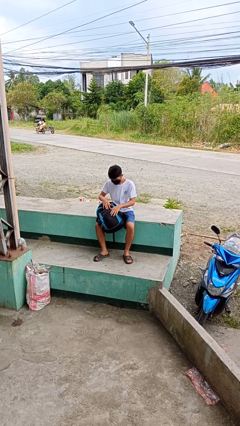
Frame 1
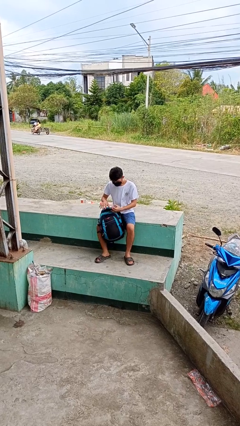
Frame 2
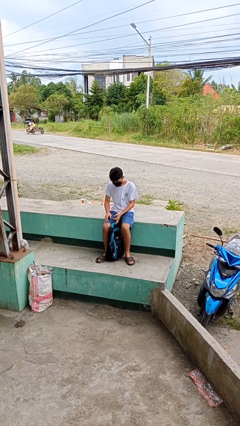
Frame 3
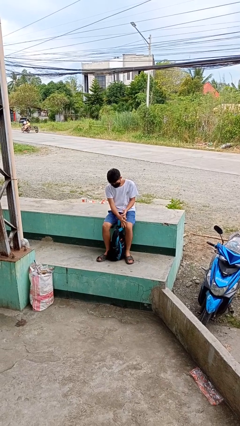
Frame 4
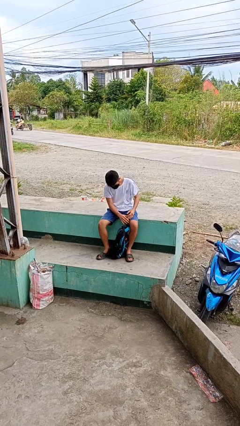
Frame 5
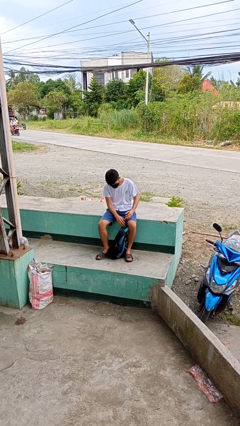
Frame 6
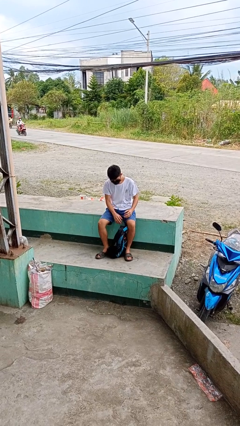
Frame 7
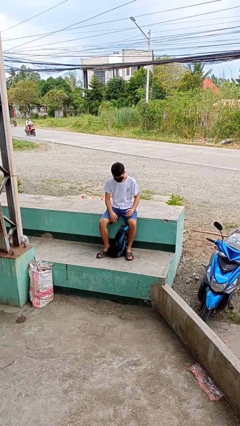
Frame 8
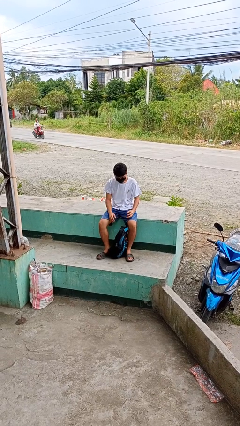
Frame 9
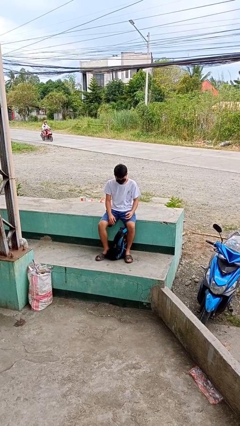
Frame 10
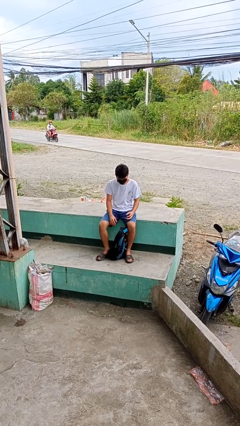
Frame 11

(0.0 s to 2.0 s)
person drops object

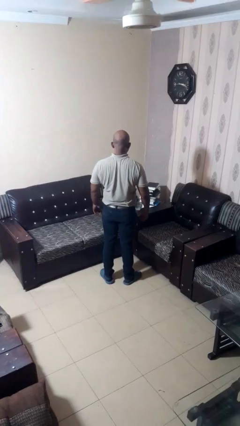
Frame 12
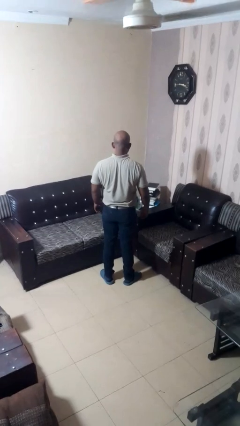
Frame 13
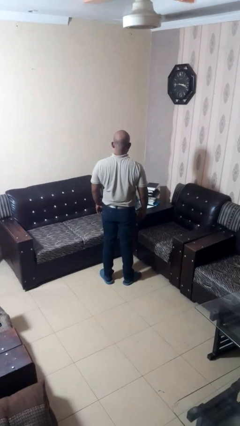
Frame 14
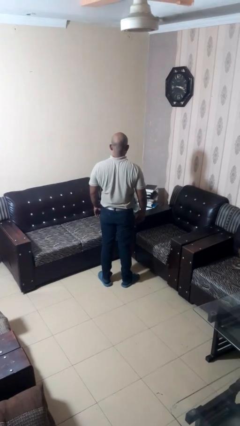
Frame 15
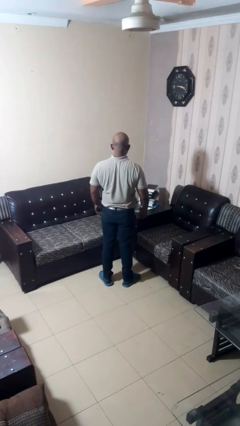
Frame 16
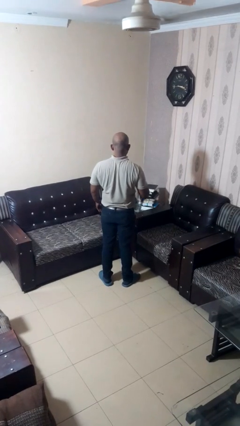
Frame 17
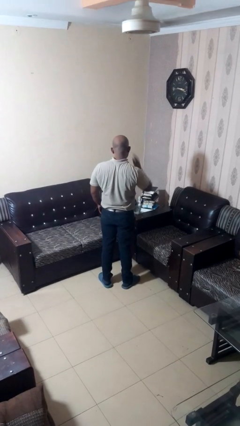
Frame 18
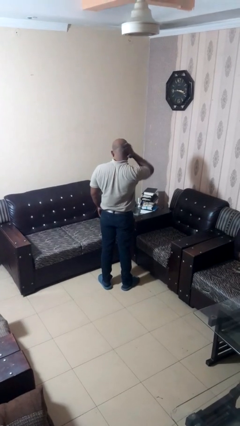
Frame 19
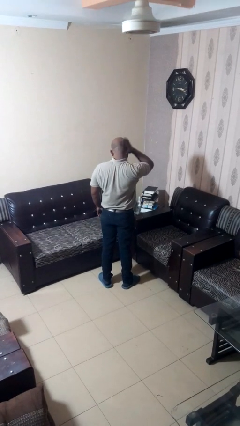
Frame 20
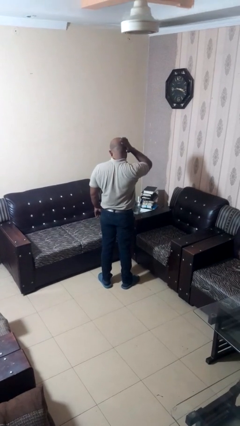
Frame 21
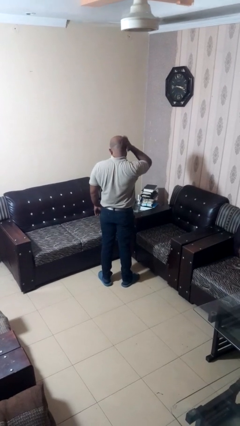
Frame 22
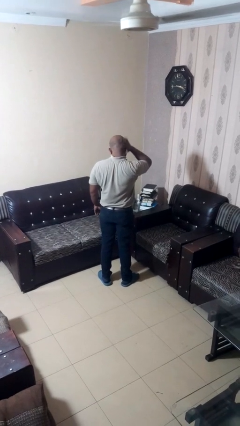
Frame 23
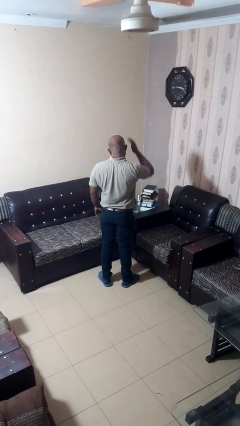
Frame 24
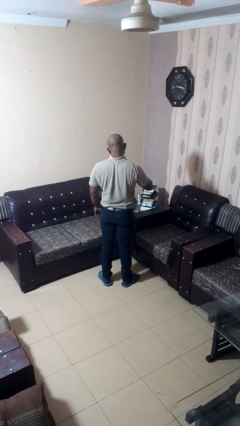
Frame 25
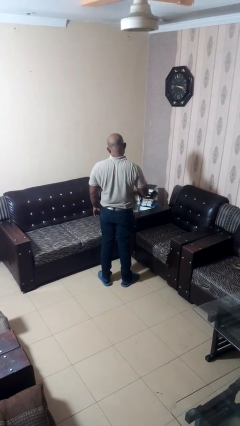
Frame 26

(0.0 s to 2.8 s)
person touches earlobe

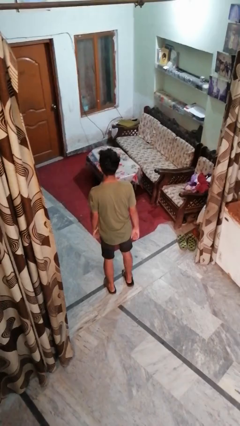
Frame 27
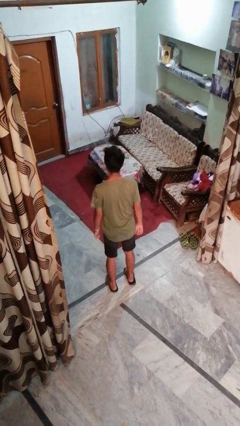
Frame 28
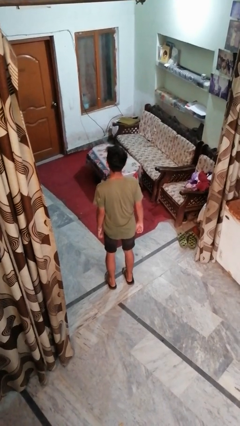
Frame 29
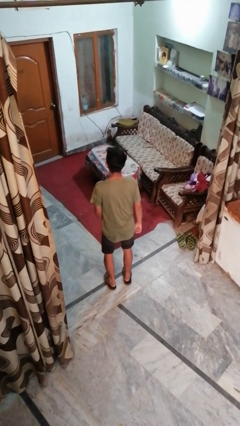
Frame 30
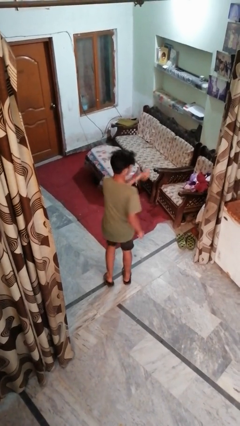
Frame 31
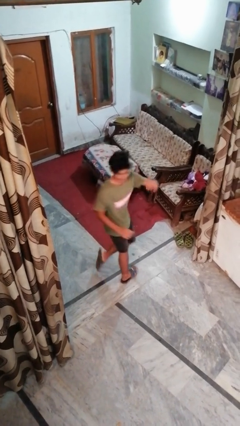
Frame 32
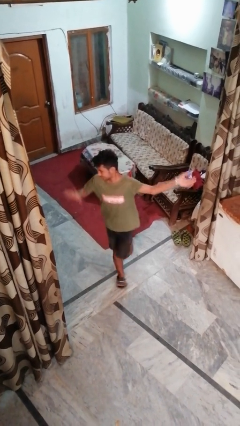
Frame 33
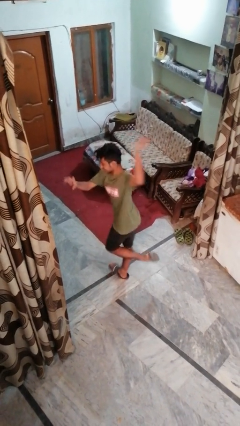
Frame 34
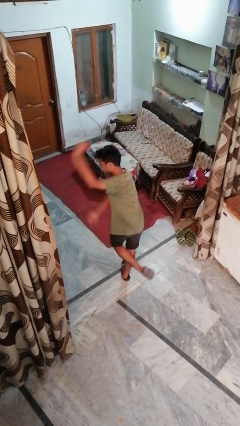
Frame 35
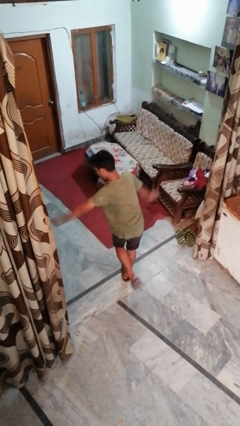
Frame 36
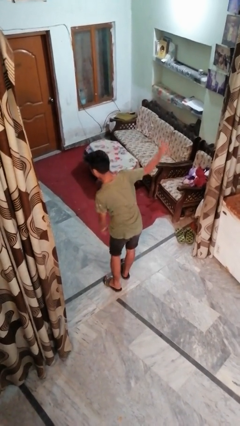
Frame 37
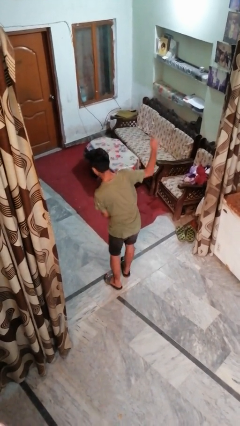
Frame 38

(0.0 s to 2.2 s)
person twirls

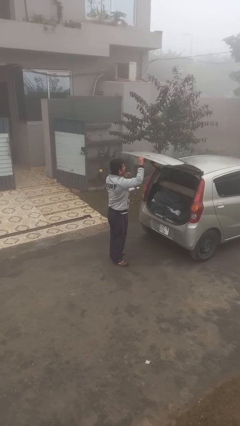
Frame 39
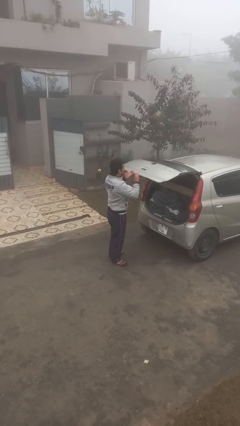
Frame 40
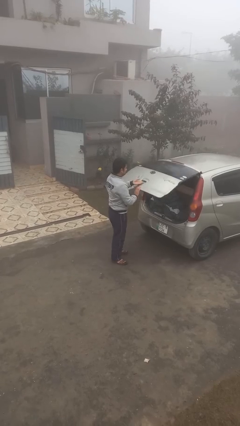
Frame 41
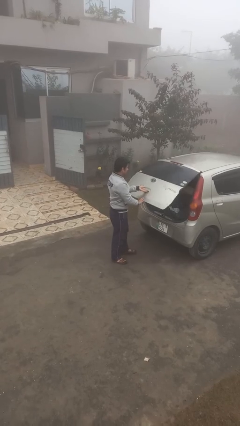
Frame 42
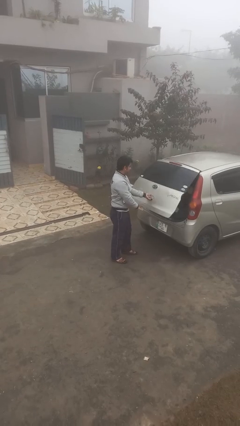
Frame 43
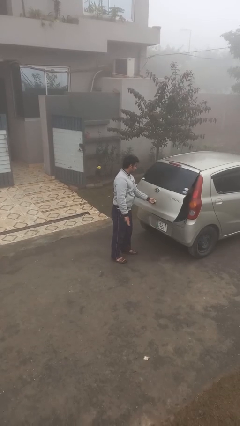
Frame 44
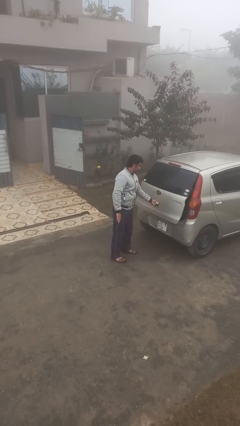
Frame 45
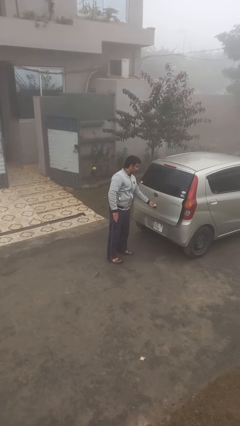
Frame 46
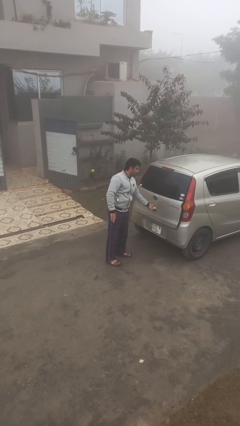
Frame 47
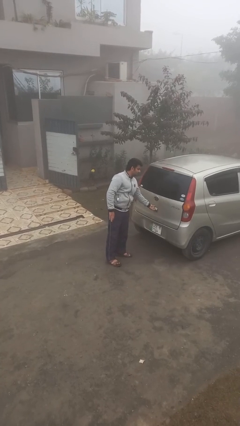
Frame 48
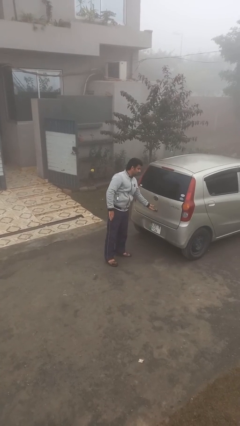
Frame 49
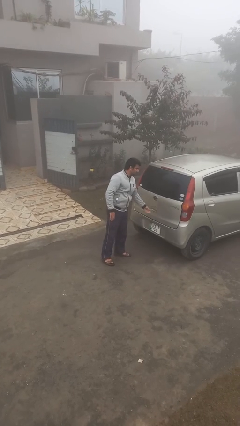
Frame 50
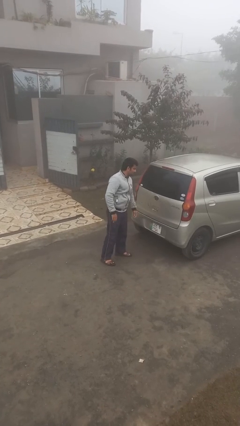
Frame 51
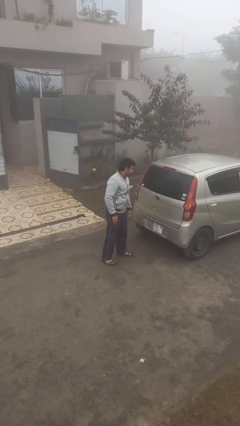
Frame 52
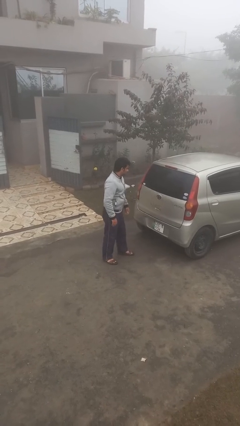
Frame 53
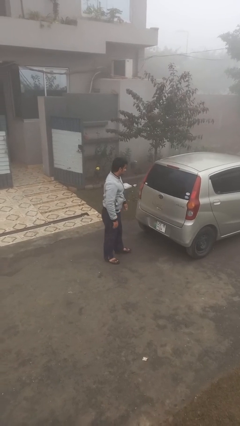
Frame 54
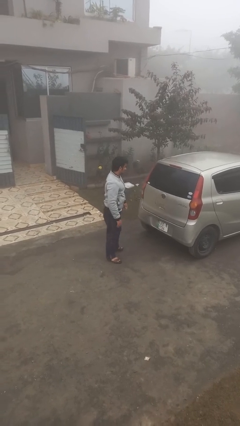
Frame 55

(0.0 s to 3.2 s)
person closes car trunk

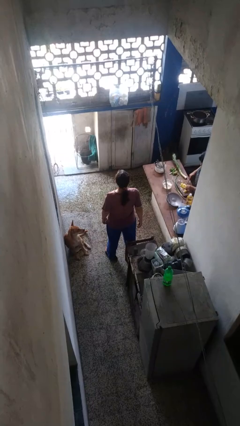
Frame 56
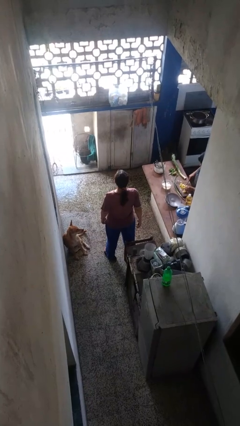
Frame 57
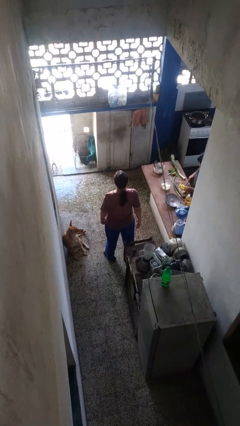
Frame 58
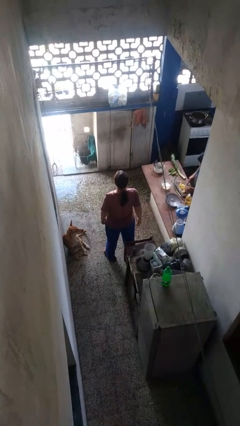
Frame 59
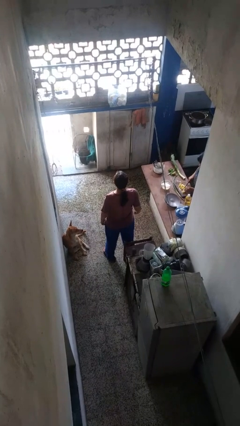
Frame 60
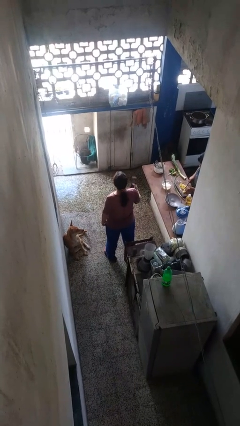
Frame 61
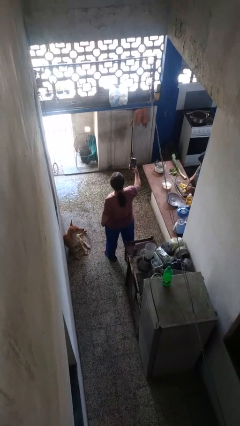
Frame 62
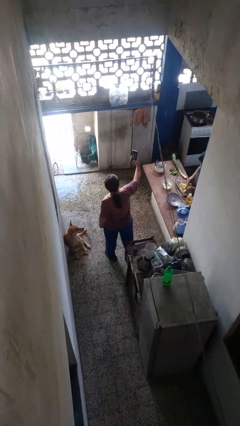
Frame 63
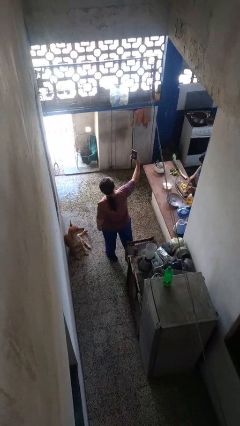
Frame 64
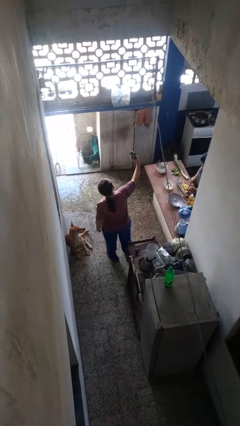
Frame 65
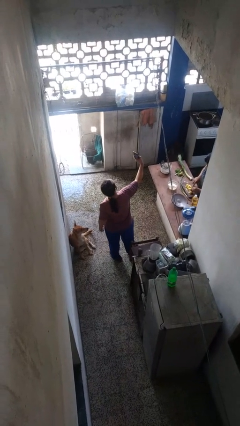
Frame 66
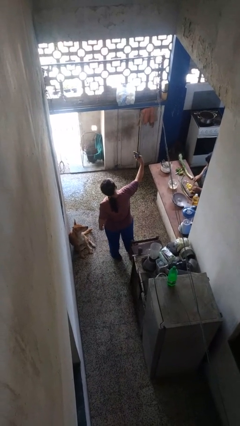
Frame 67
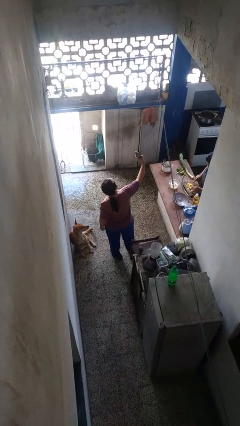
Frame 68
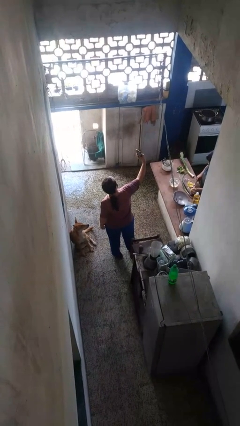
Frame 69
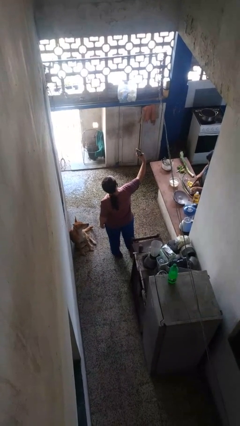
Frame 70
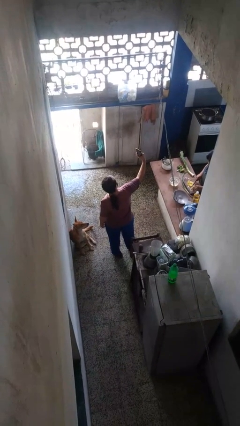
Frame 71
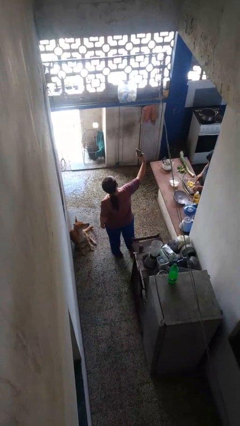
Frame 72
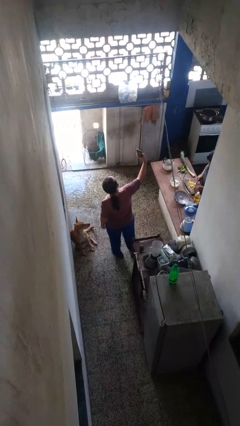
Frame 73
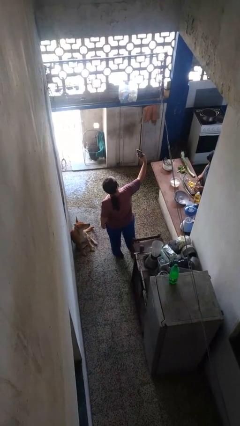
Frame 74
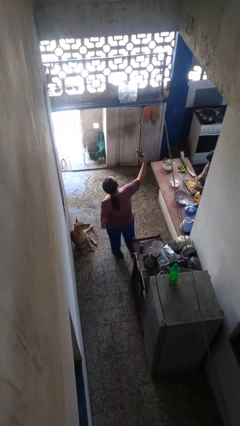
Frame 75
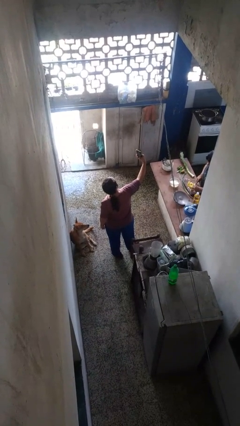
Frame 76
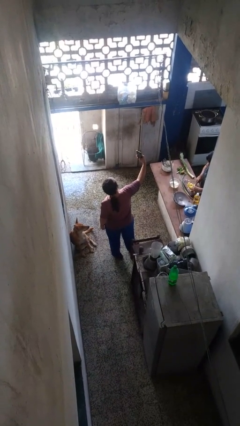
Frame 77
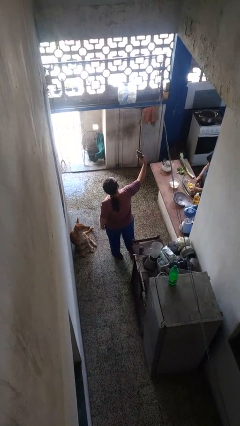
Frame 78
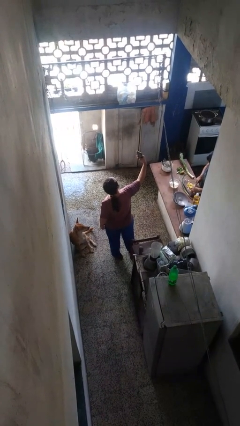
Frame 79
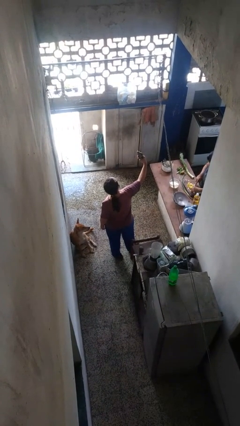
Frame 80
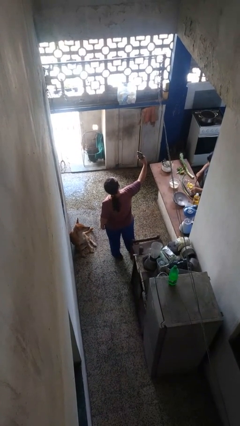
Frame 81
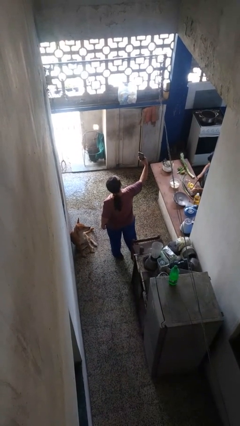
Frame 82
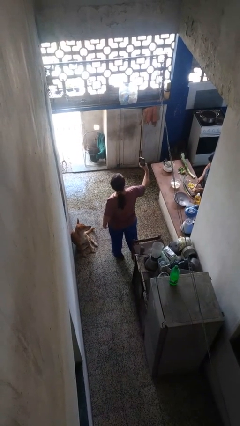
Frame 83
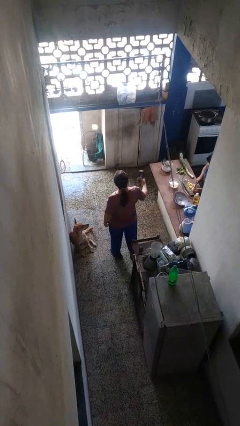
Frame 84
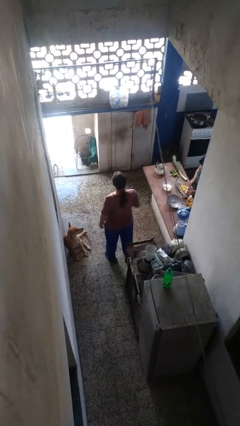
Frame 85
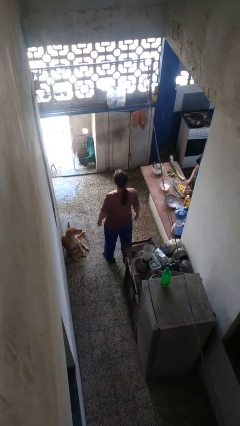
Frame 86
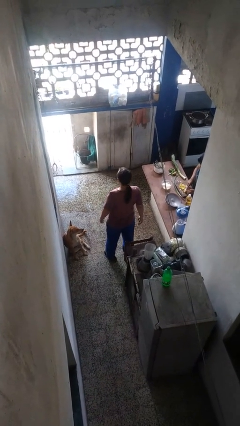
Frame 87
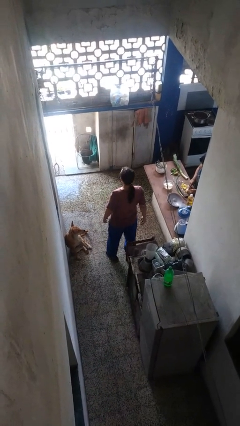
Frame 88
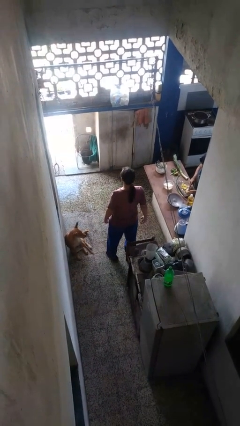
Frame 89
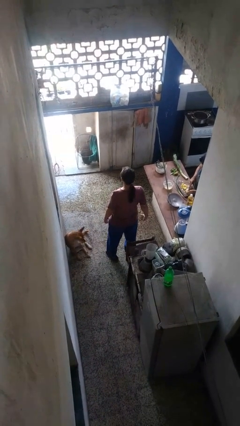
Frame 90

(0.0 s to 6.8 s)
person takes selfie

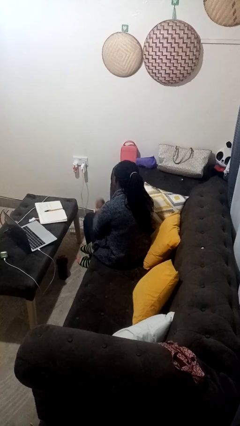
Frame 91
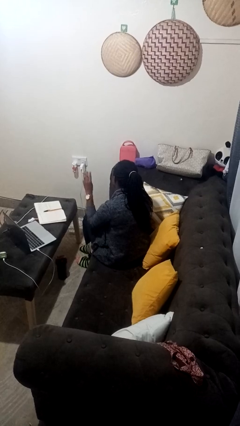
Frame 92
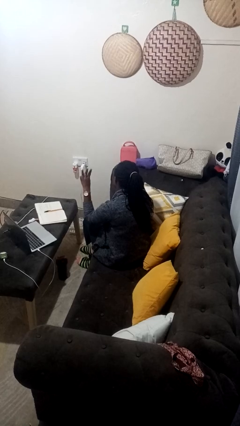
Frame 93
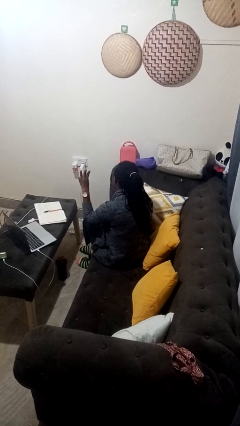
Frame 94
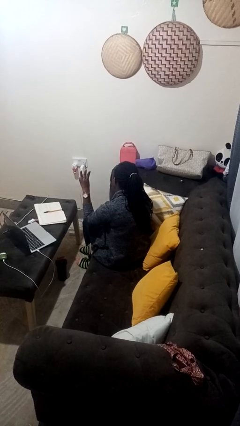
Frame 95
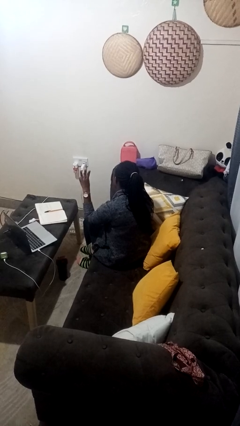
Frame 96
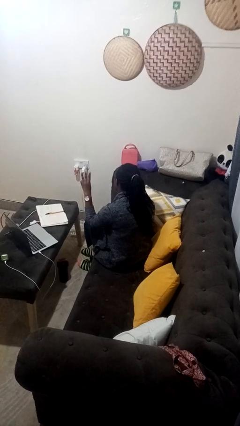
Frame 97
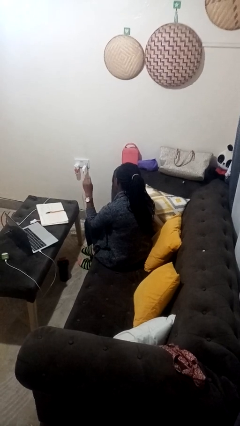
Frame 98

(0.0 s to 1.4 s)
person gestures number three
